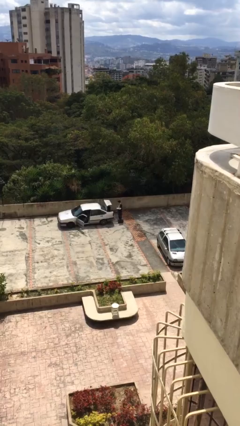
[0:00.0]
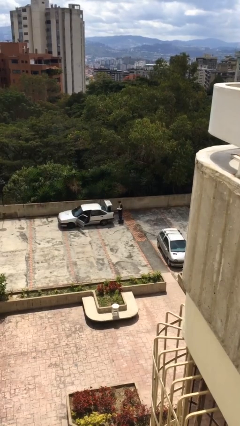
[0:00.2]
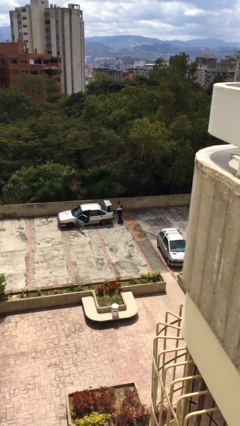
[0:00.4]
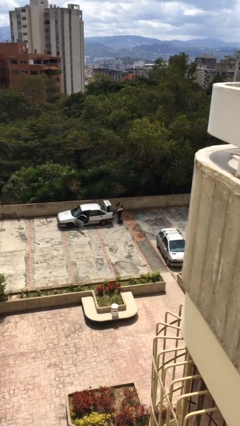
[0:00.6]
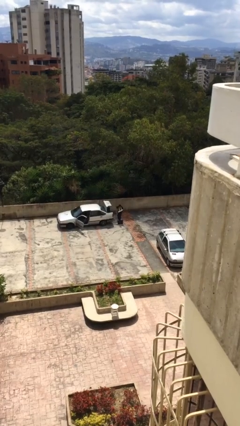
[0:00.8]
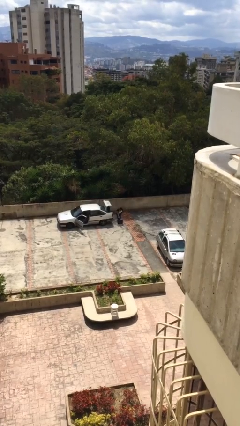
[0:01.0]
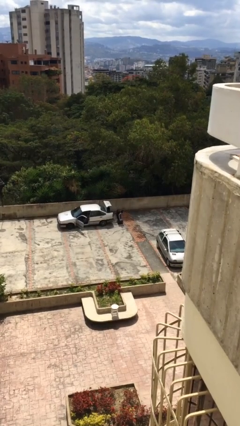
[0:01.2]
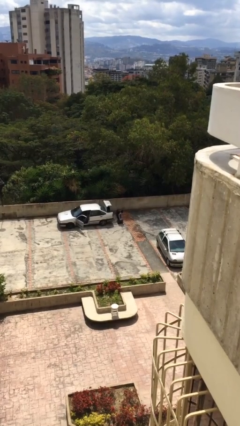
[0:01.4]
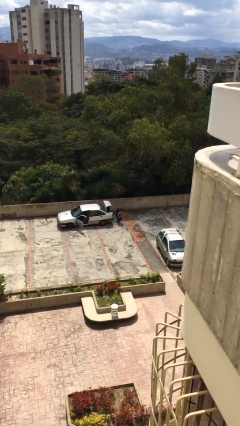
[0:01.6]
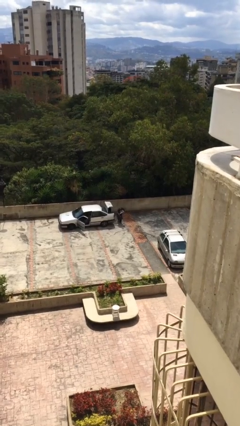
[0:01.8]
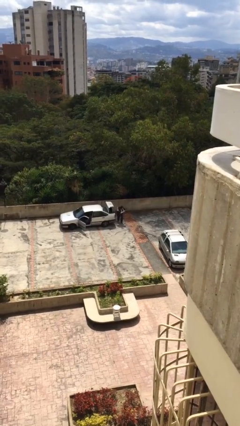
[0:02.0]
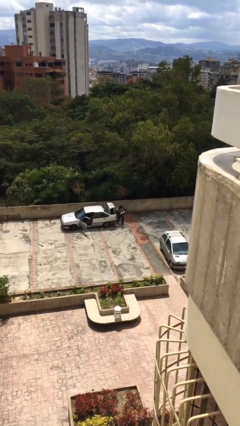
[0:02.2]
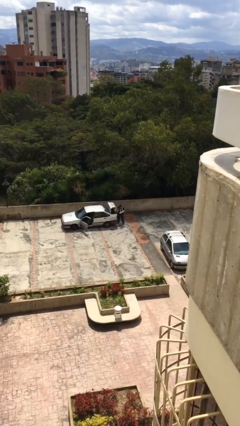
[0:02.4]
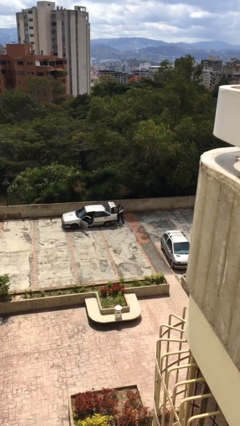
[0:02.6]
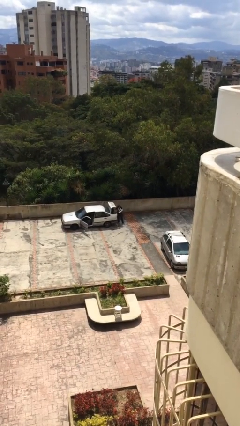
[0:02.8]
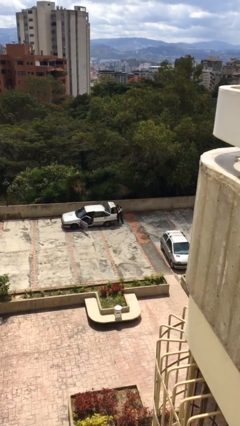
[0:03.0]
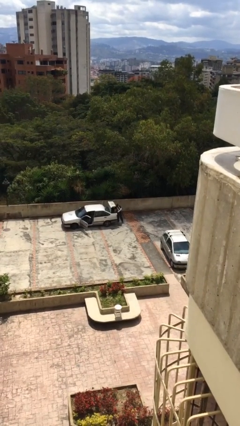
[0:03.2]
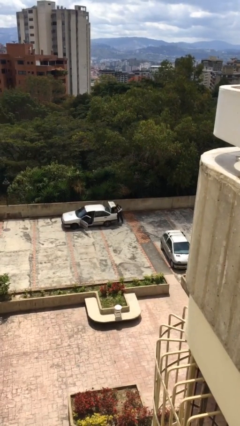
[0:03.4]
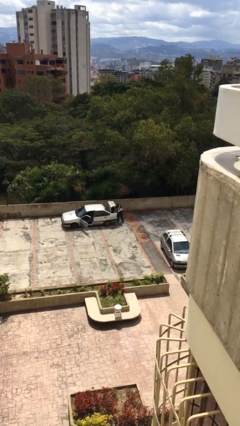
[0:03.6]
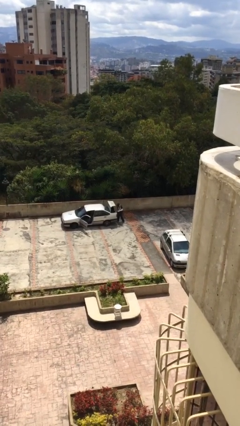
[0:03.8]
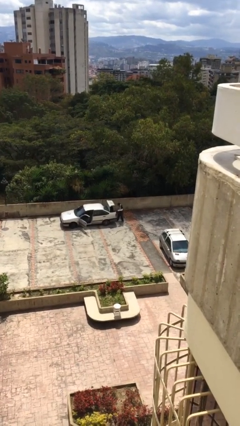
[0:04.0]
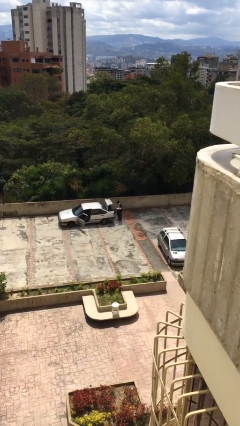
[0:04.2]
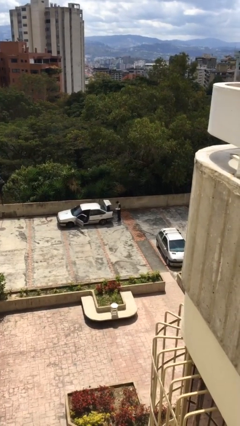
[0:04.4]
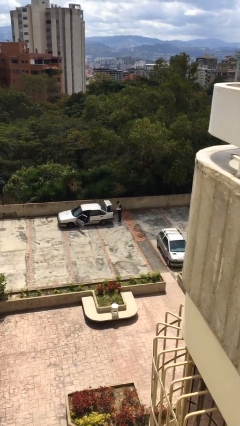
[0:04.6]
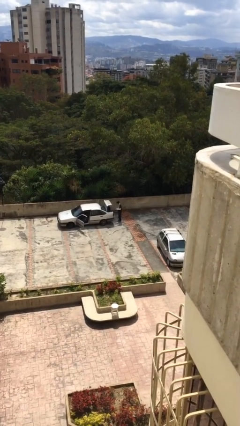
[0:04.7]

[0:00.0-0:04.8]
person loads car

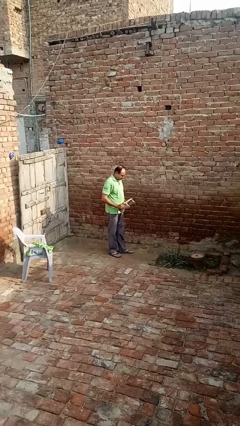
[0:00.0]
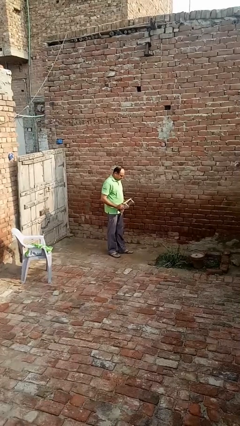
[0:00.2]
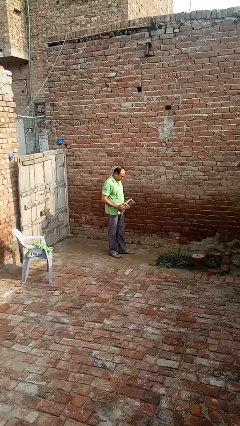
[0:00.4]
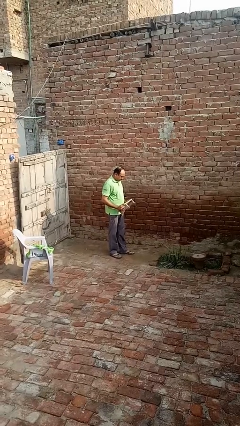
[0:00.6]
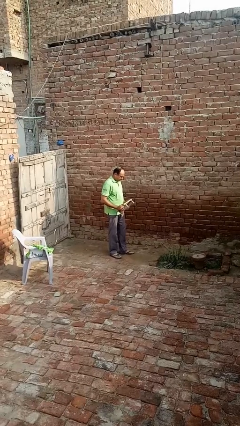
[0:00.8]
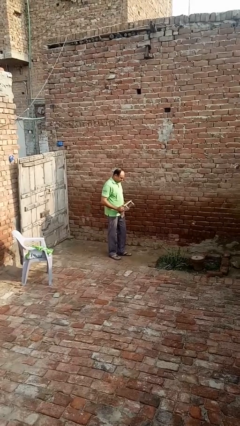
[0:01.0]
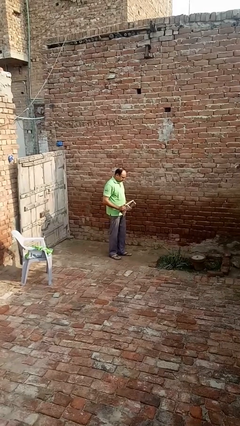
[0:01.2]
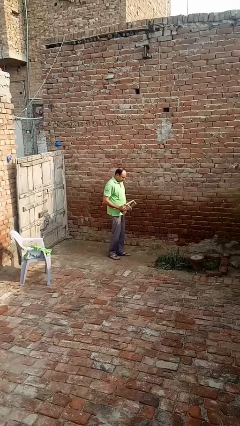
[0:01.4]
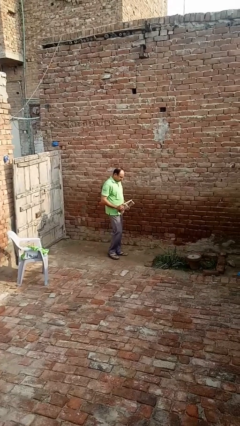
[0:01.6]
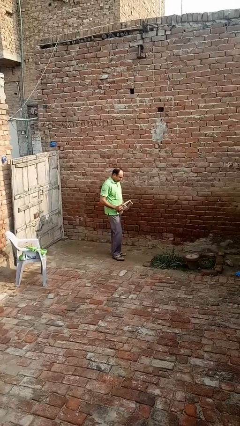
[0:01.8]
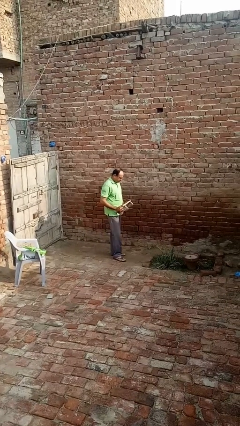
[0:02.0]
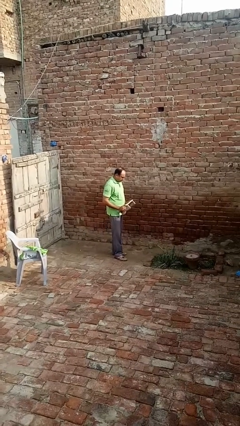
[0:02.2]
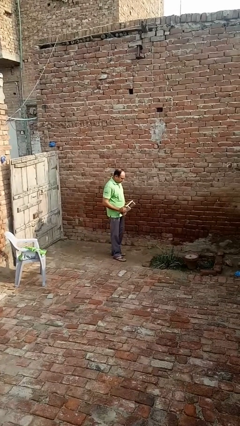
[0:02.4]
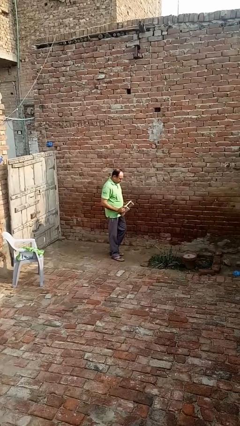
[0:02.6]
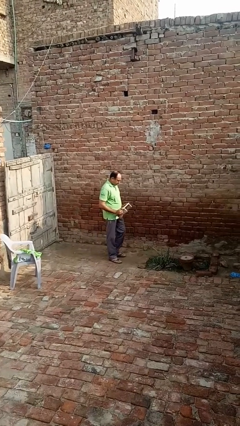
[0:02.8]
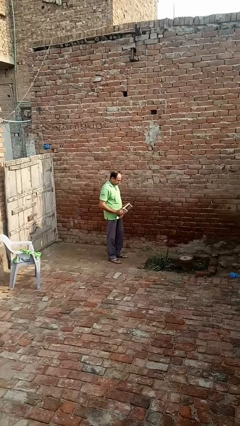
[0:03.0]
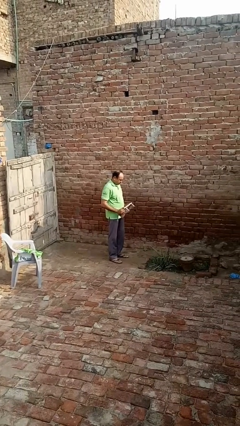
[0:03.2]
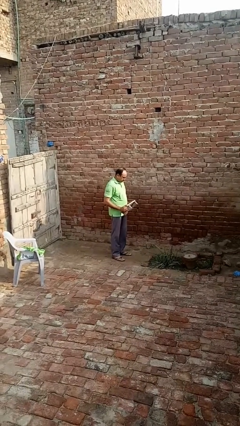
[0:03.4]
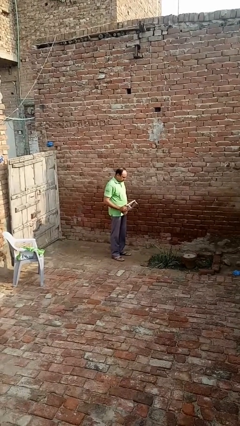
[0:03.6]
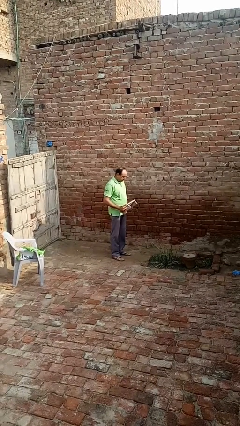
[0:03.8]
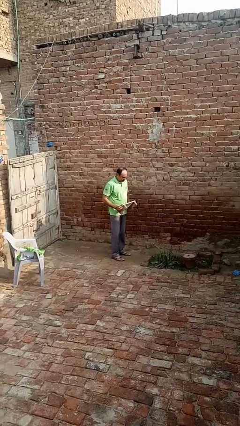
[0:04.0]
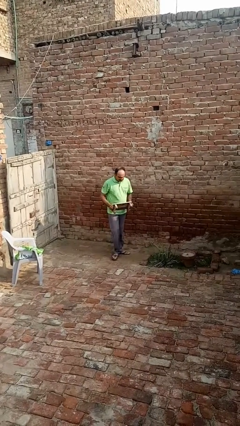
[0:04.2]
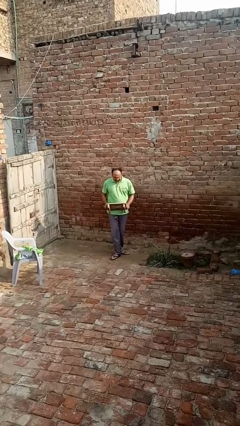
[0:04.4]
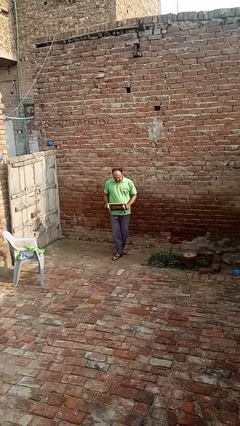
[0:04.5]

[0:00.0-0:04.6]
person carries furniture

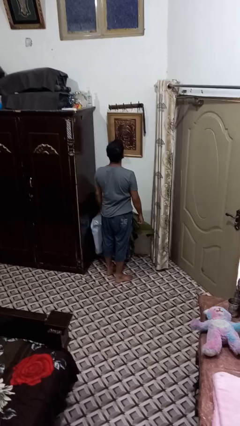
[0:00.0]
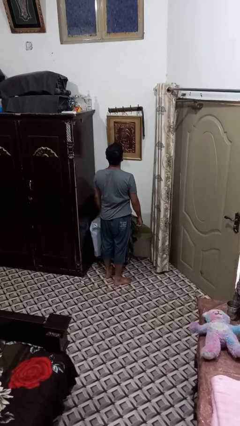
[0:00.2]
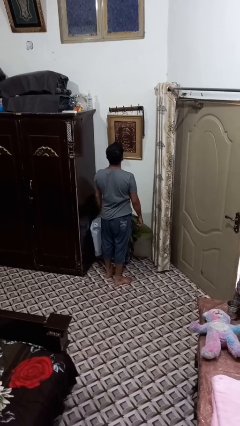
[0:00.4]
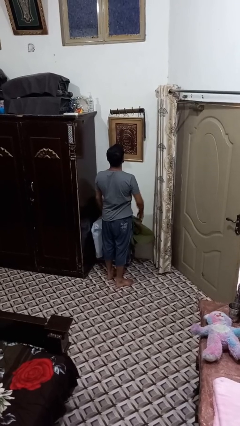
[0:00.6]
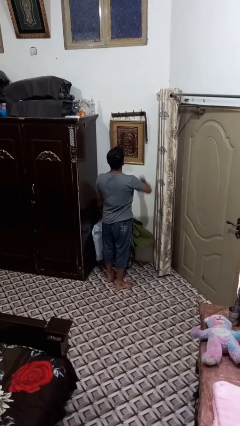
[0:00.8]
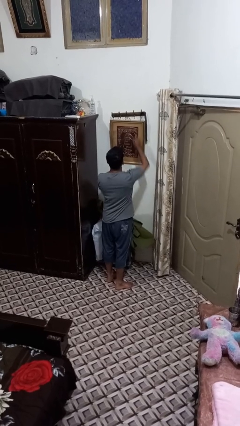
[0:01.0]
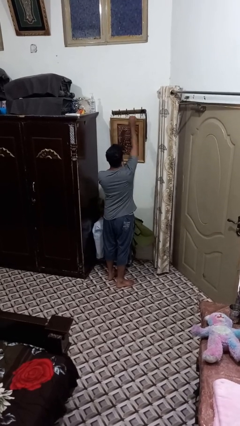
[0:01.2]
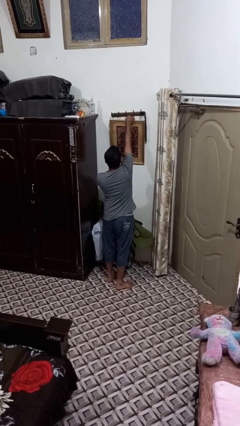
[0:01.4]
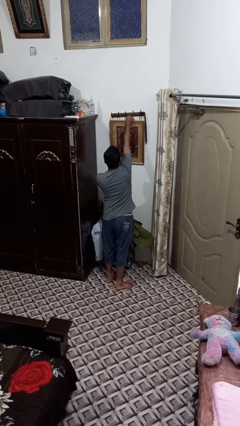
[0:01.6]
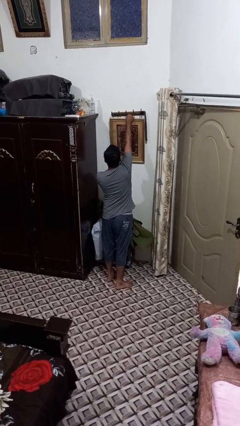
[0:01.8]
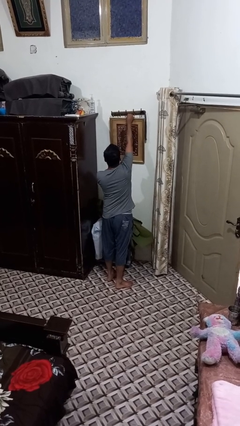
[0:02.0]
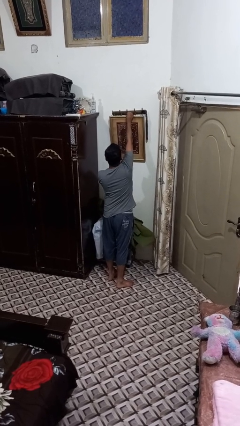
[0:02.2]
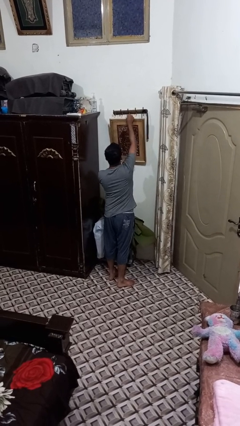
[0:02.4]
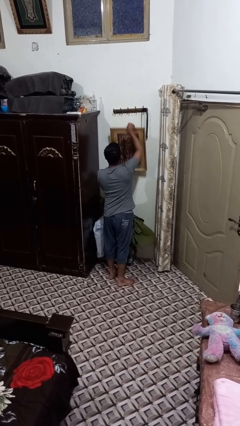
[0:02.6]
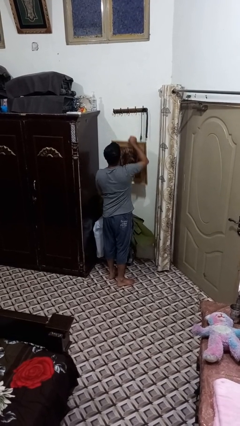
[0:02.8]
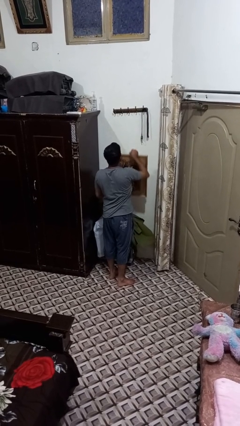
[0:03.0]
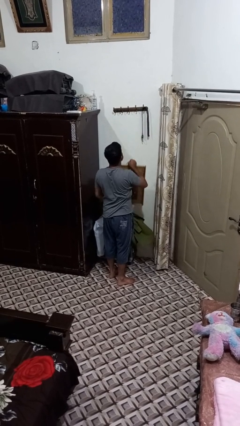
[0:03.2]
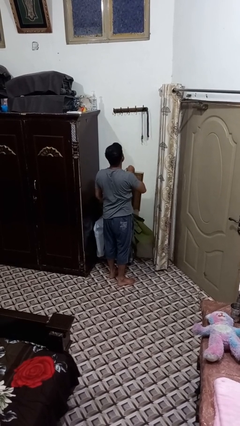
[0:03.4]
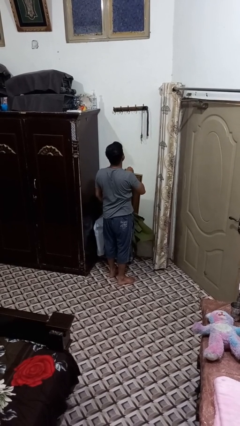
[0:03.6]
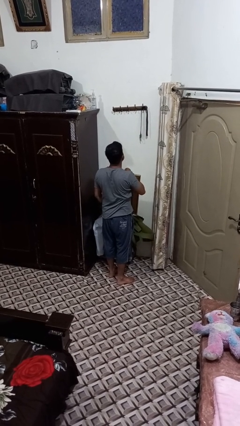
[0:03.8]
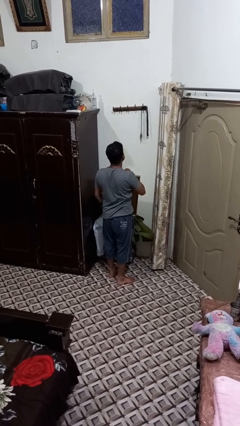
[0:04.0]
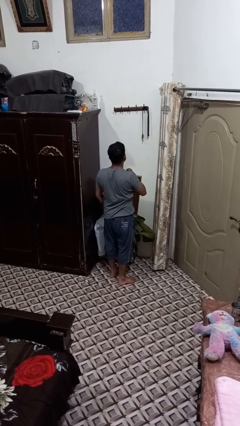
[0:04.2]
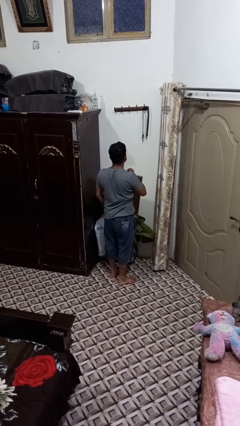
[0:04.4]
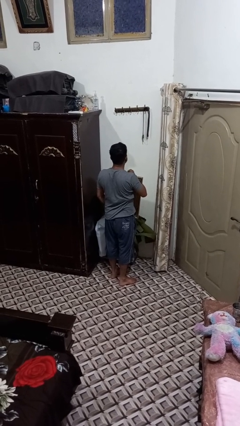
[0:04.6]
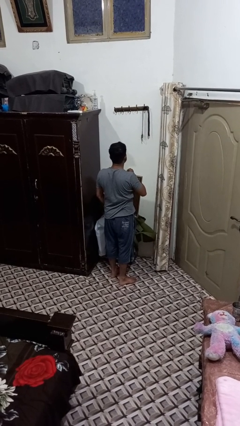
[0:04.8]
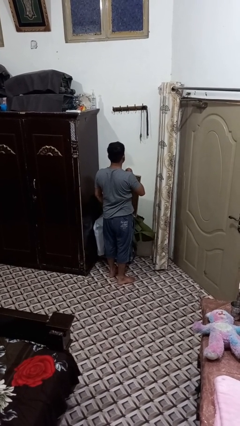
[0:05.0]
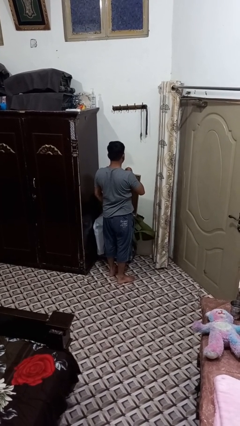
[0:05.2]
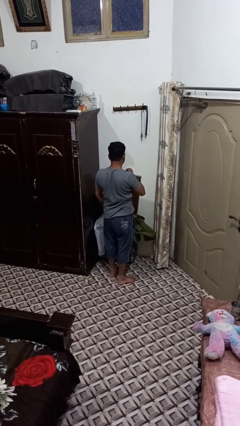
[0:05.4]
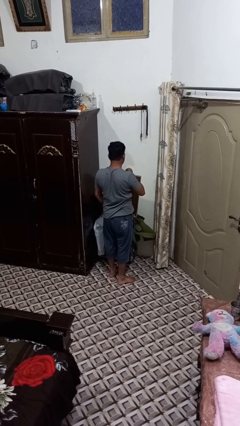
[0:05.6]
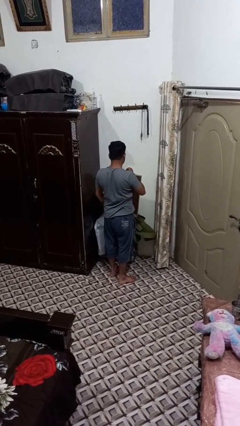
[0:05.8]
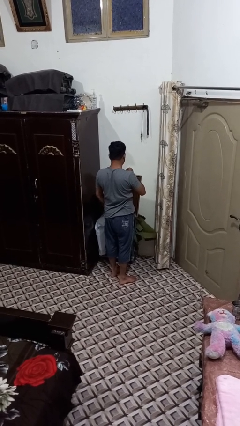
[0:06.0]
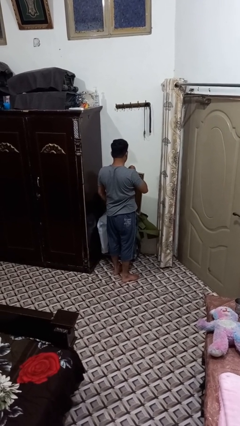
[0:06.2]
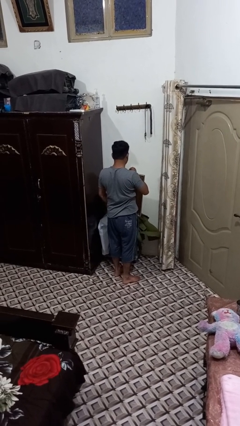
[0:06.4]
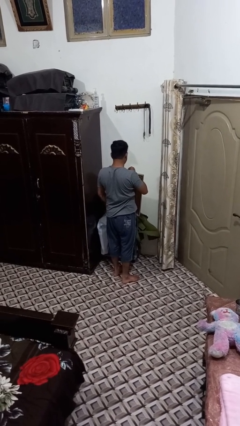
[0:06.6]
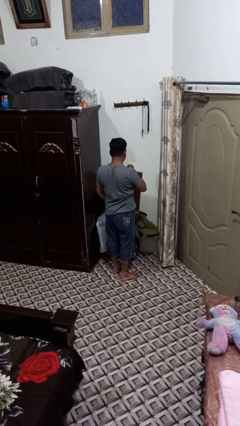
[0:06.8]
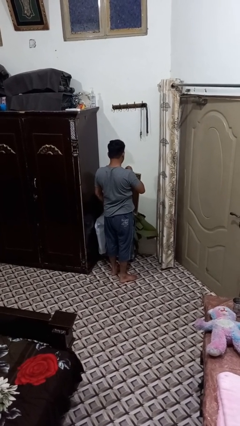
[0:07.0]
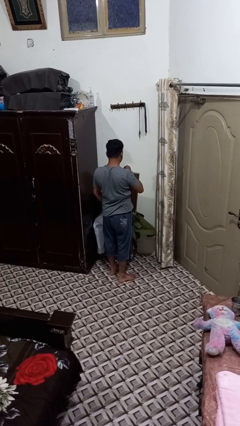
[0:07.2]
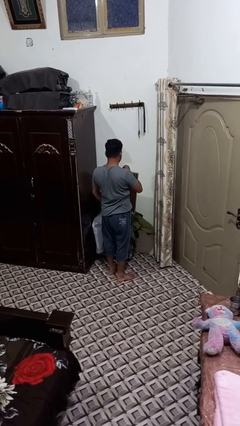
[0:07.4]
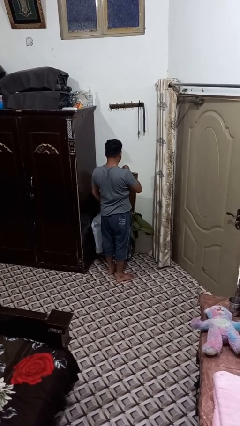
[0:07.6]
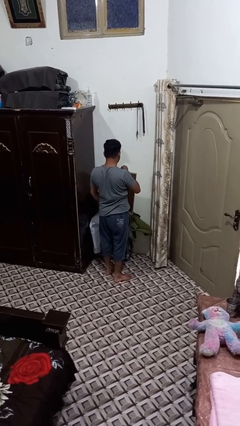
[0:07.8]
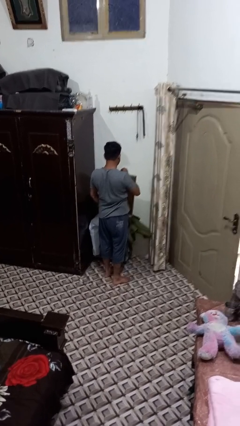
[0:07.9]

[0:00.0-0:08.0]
person takes down picture frame

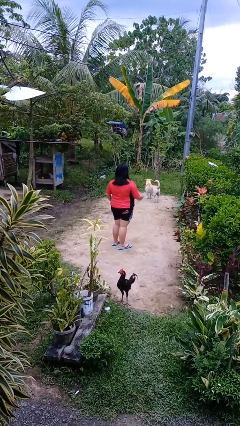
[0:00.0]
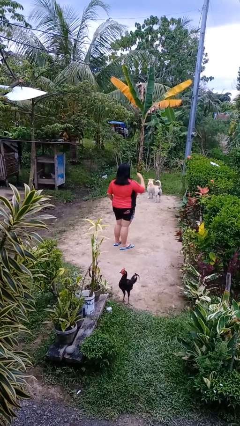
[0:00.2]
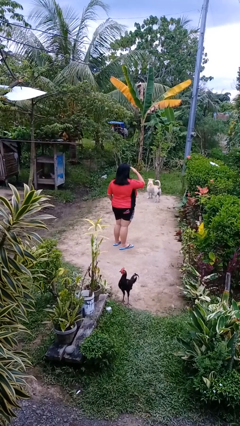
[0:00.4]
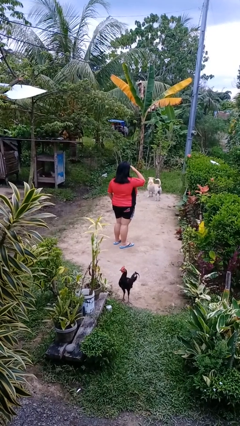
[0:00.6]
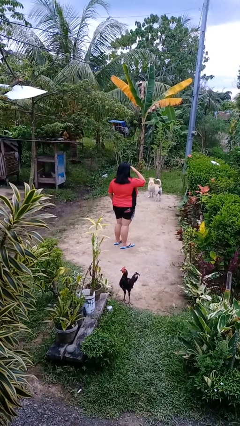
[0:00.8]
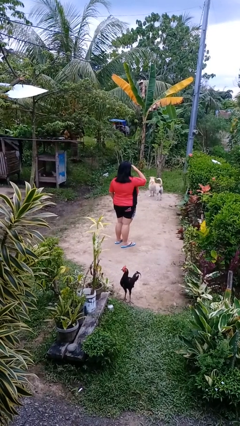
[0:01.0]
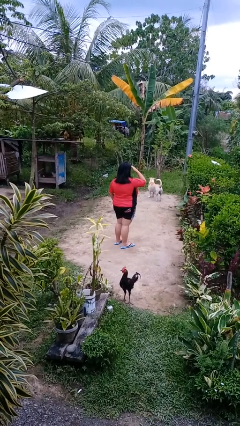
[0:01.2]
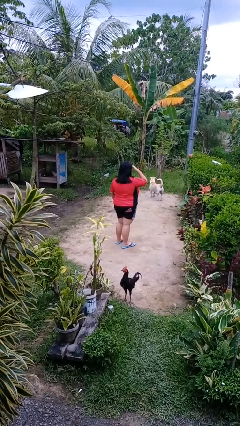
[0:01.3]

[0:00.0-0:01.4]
person shades eyes
